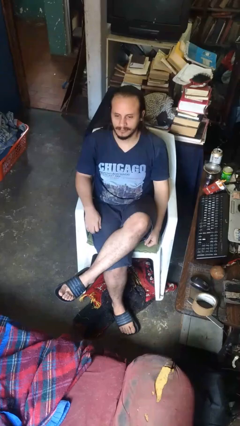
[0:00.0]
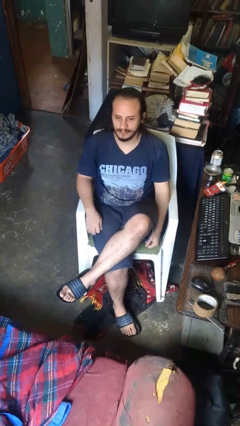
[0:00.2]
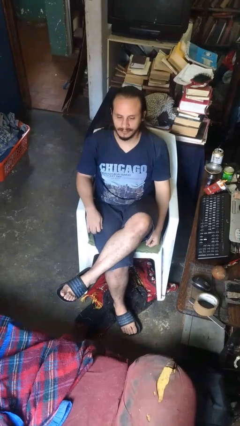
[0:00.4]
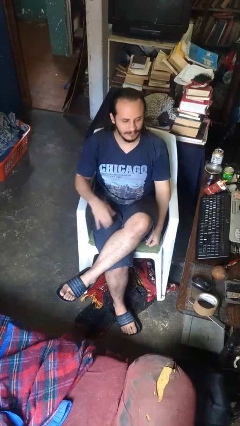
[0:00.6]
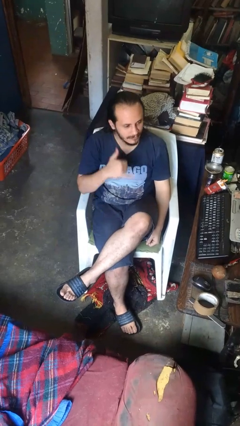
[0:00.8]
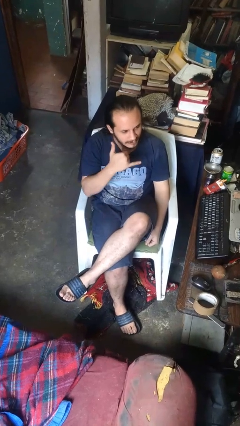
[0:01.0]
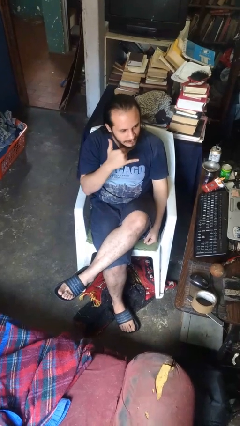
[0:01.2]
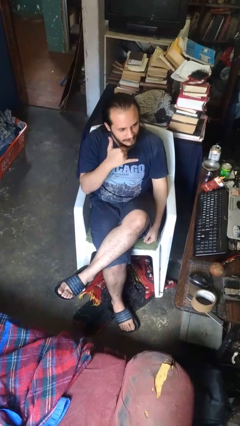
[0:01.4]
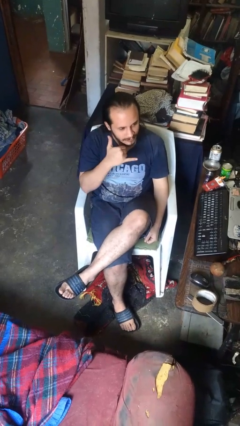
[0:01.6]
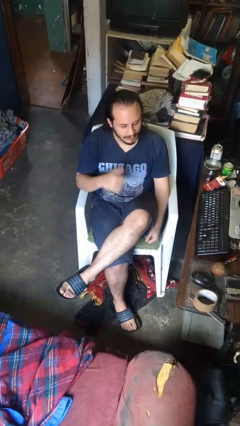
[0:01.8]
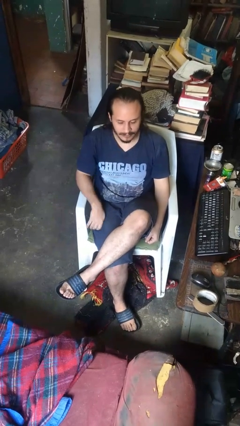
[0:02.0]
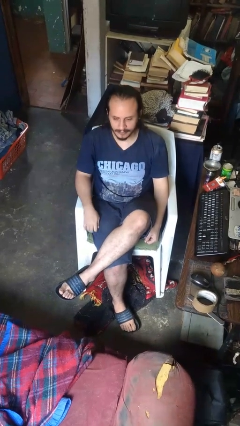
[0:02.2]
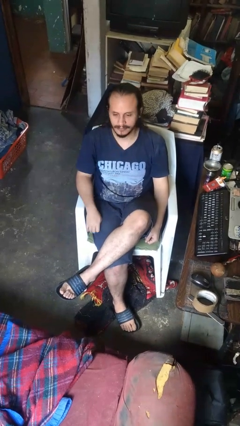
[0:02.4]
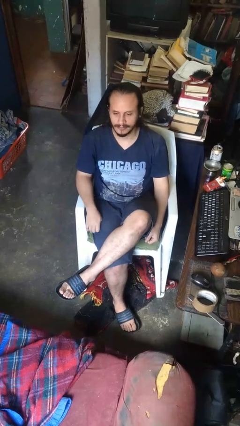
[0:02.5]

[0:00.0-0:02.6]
person gestures call me

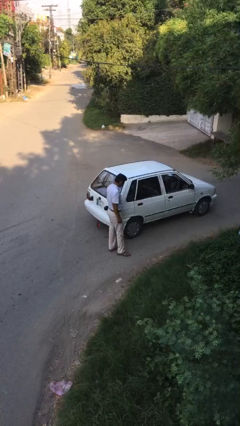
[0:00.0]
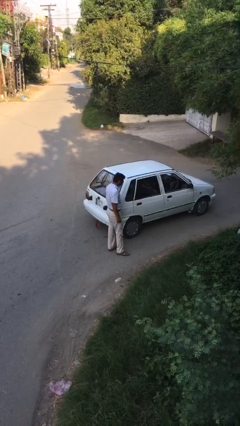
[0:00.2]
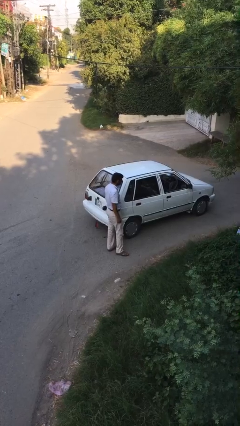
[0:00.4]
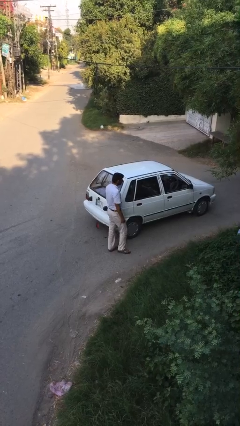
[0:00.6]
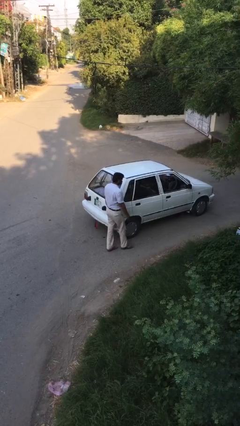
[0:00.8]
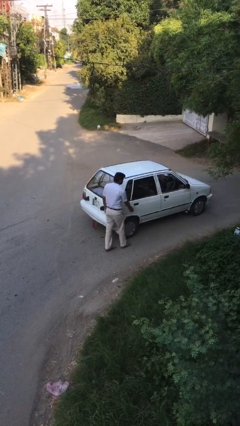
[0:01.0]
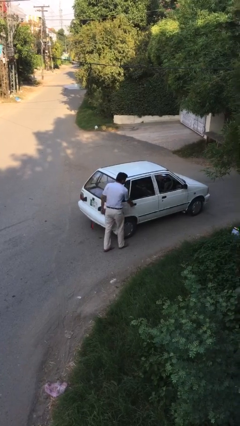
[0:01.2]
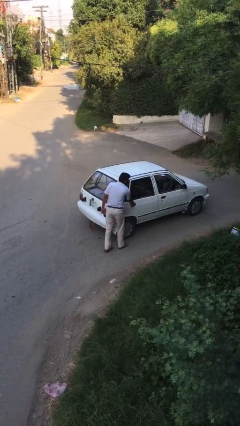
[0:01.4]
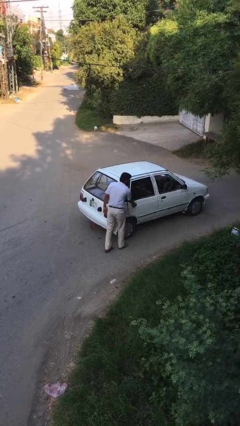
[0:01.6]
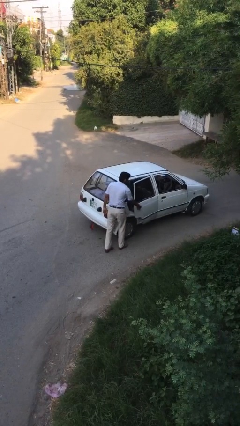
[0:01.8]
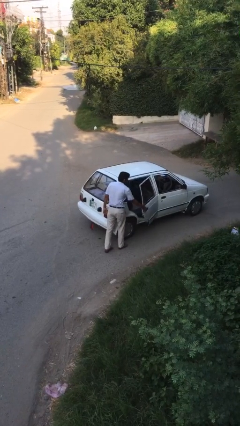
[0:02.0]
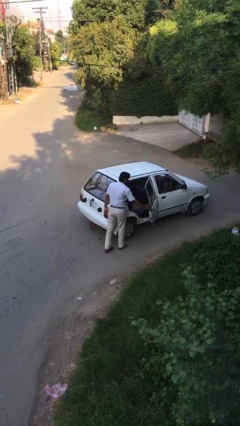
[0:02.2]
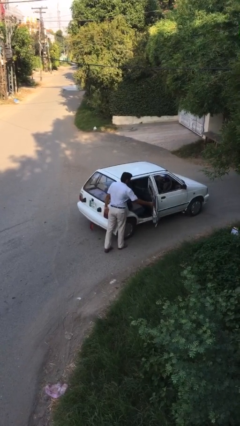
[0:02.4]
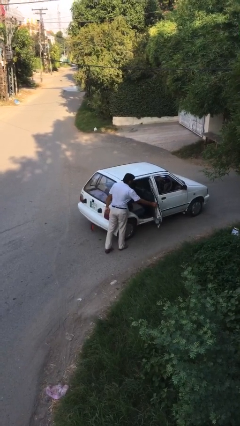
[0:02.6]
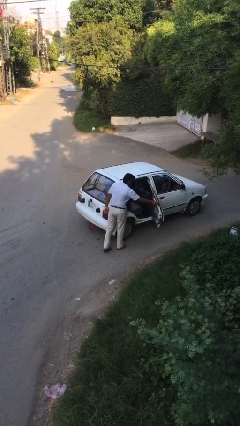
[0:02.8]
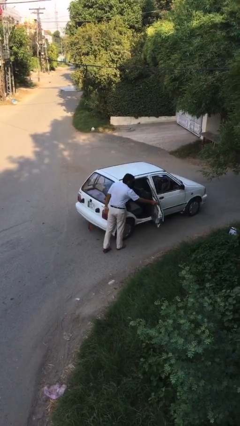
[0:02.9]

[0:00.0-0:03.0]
person opens car door

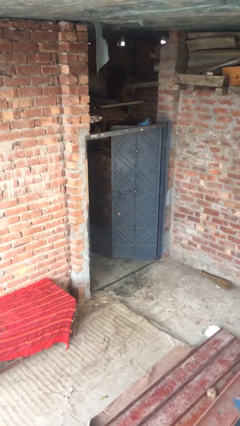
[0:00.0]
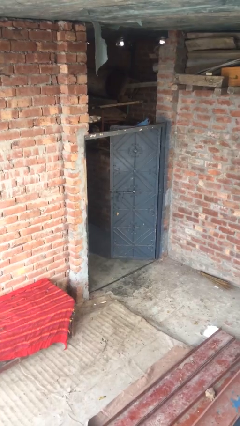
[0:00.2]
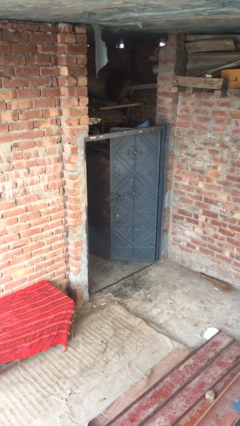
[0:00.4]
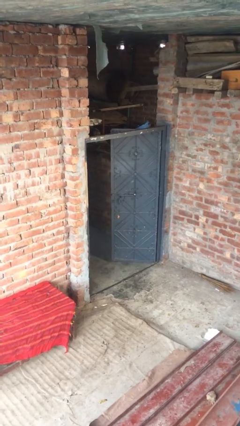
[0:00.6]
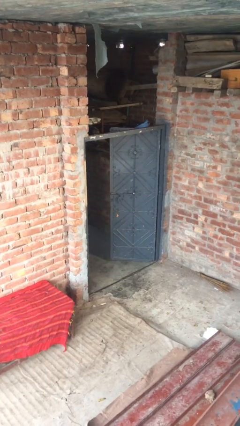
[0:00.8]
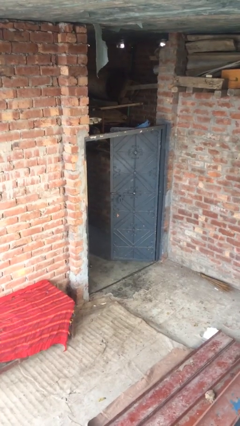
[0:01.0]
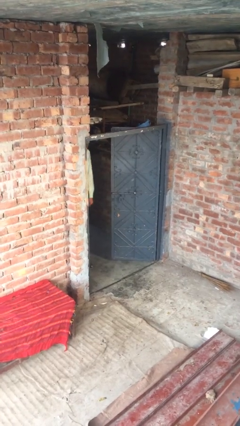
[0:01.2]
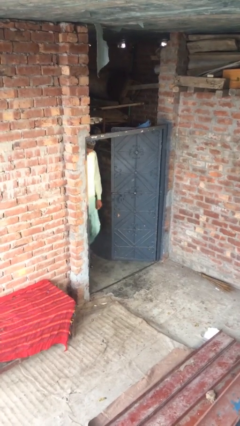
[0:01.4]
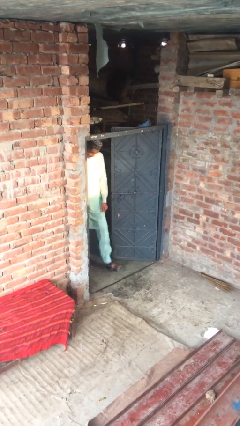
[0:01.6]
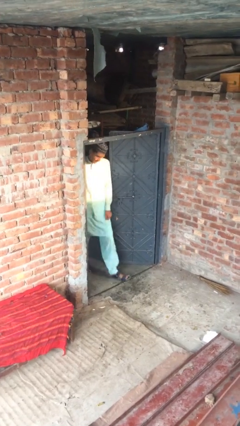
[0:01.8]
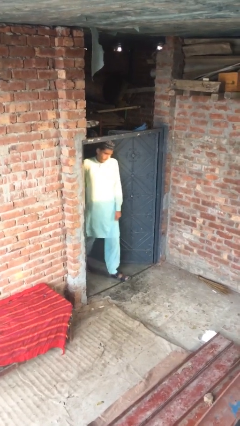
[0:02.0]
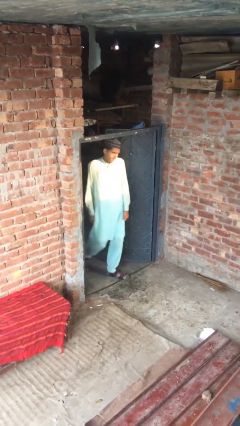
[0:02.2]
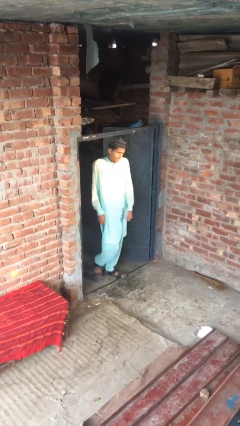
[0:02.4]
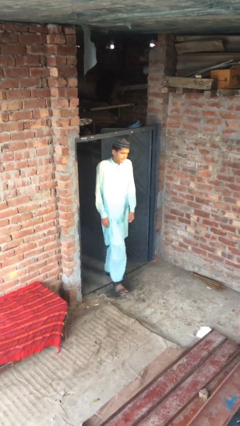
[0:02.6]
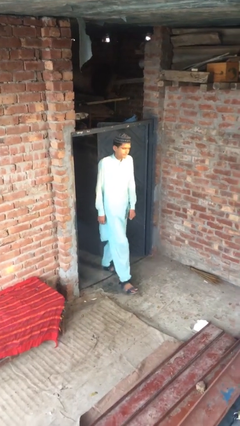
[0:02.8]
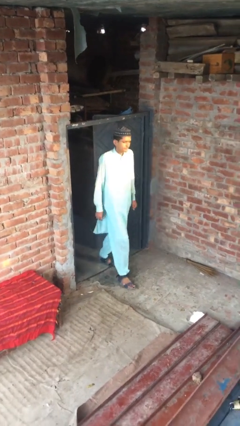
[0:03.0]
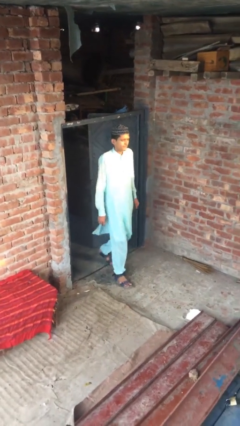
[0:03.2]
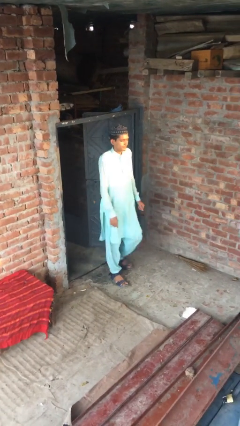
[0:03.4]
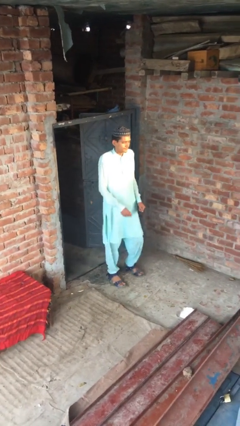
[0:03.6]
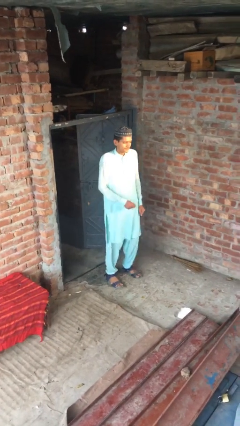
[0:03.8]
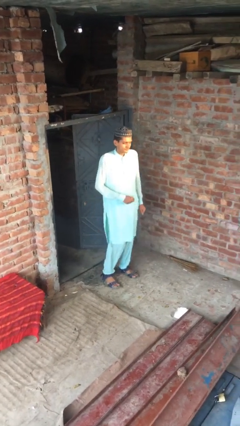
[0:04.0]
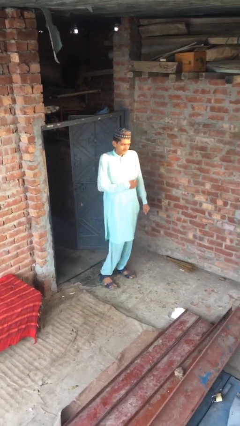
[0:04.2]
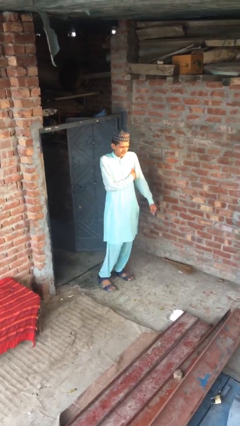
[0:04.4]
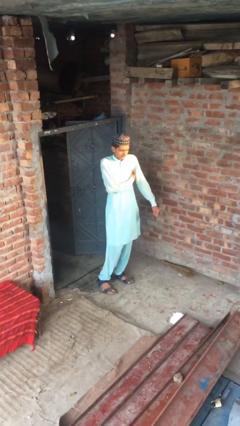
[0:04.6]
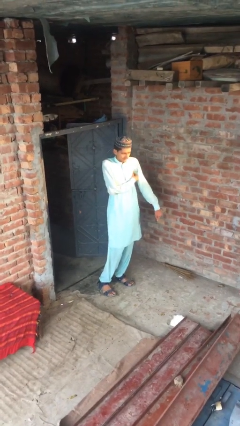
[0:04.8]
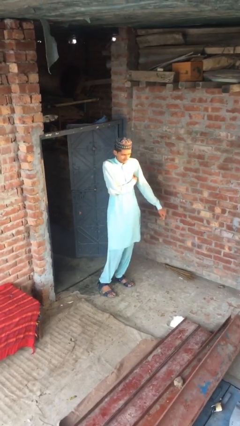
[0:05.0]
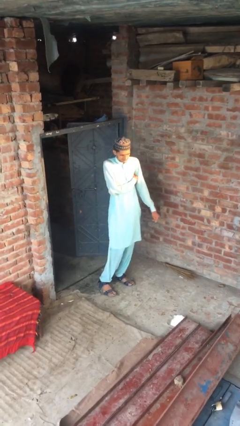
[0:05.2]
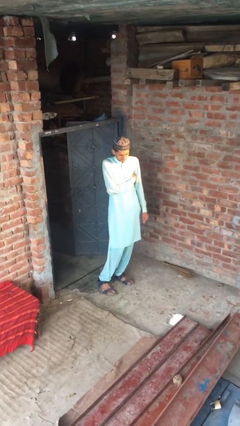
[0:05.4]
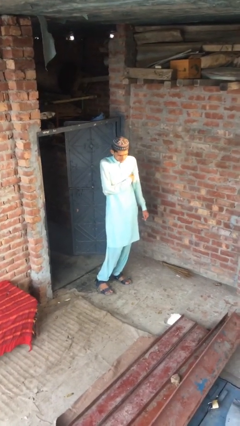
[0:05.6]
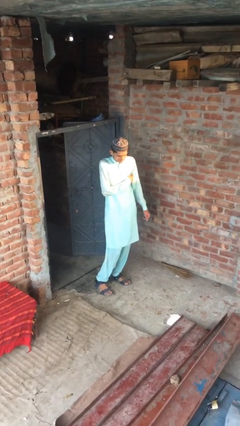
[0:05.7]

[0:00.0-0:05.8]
person enters scene through structure

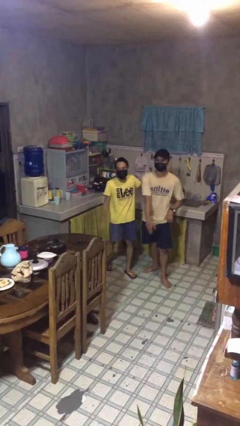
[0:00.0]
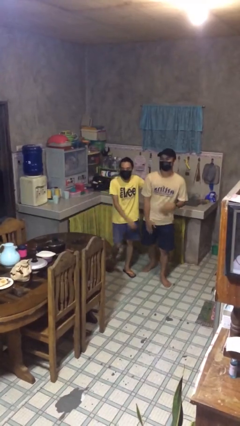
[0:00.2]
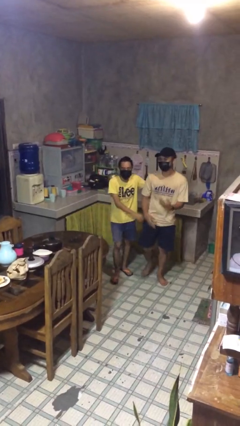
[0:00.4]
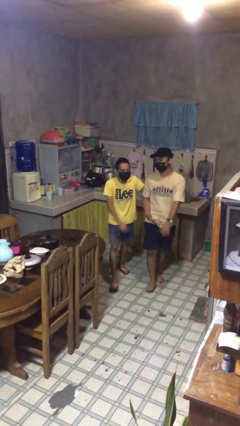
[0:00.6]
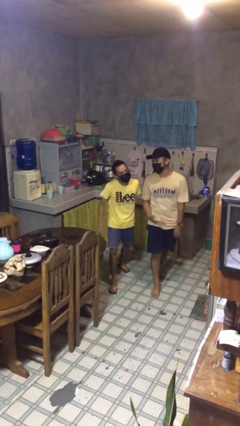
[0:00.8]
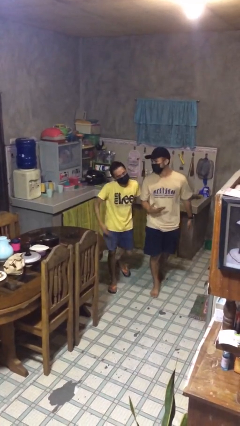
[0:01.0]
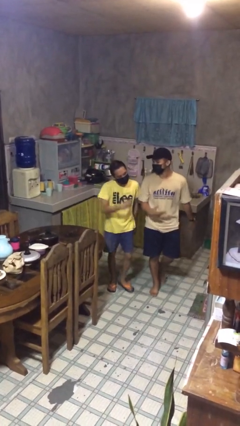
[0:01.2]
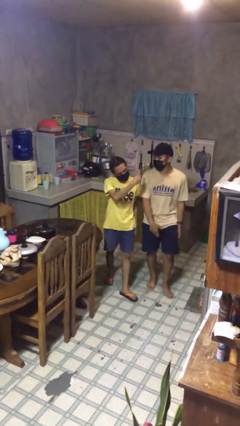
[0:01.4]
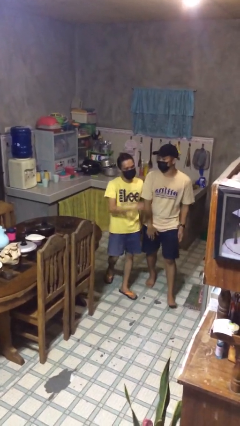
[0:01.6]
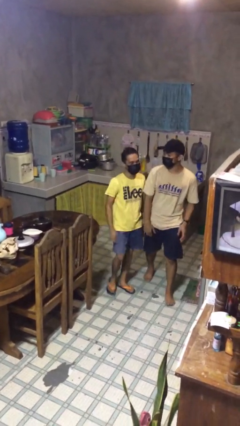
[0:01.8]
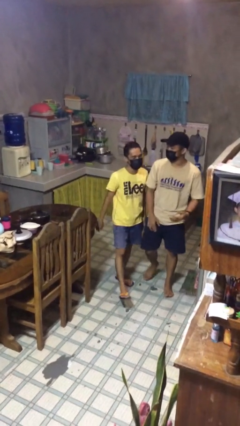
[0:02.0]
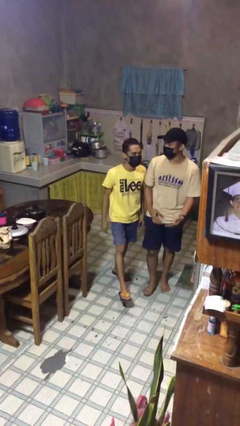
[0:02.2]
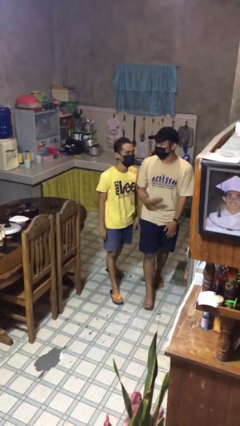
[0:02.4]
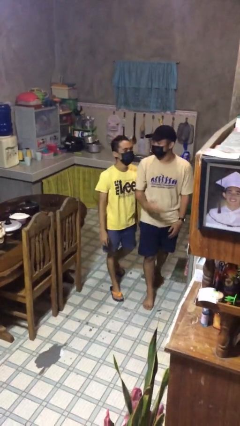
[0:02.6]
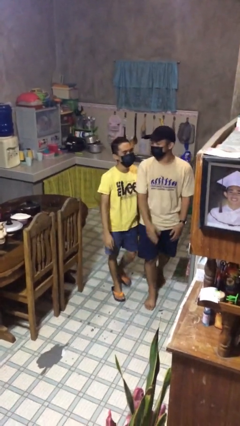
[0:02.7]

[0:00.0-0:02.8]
person talks to person

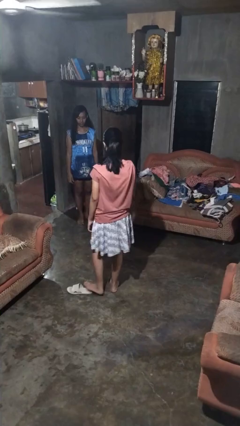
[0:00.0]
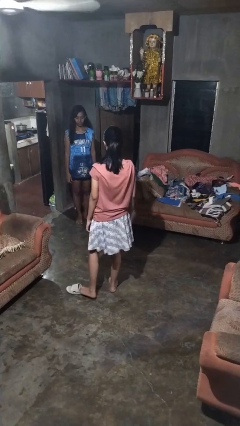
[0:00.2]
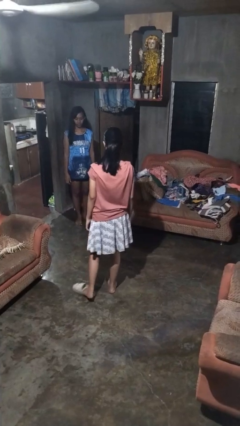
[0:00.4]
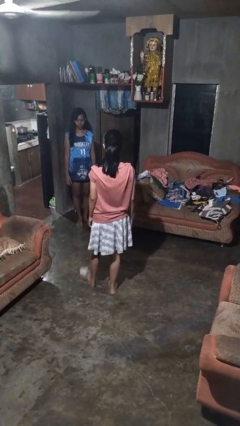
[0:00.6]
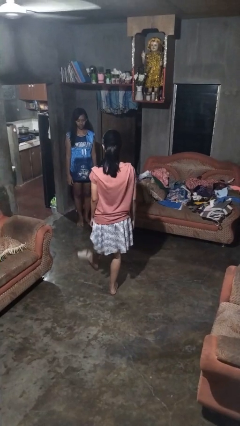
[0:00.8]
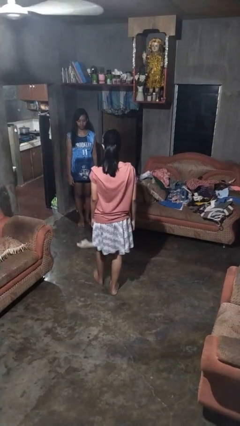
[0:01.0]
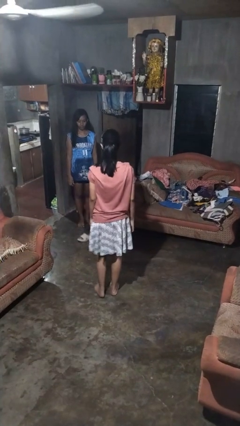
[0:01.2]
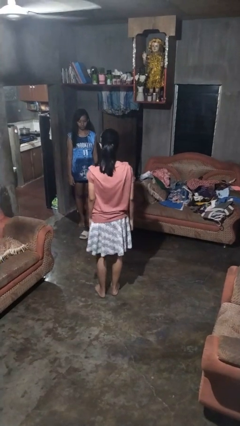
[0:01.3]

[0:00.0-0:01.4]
person kicks object to person

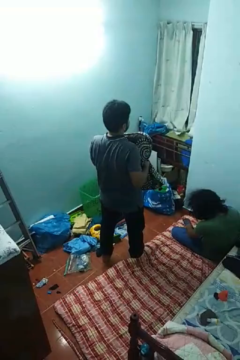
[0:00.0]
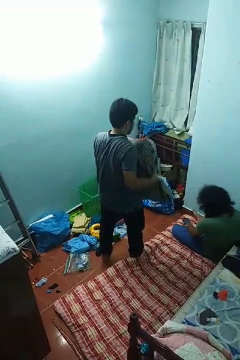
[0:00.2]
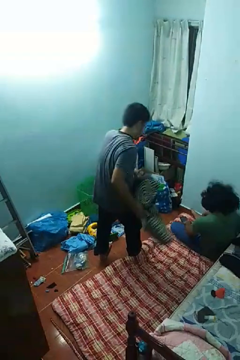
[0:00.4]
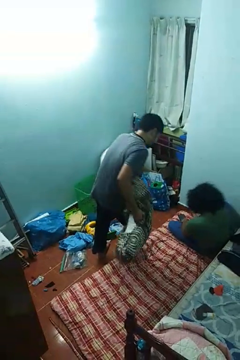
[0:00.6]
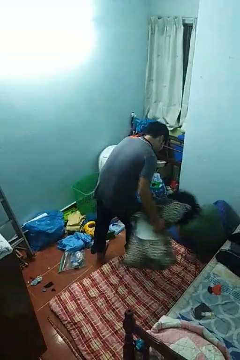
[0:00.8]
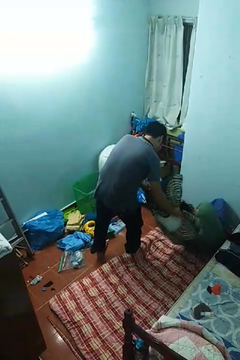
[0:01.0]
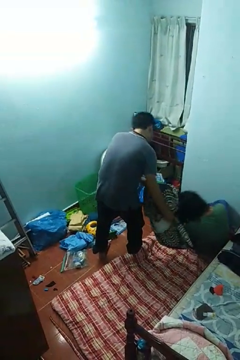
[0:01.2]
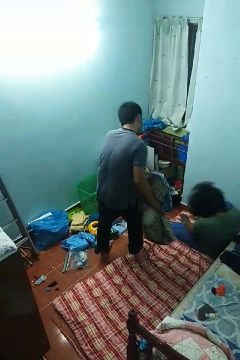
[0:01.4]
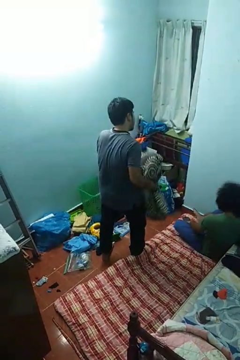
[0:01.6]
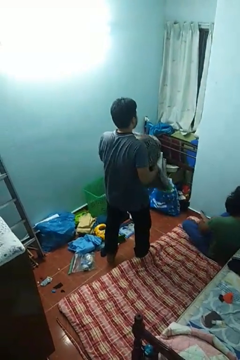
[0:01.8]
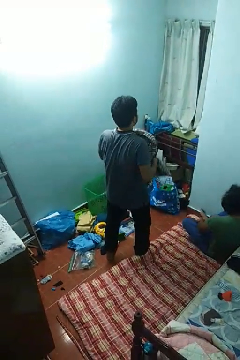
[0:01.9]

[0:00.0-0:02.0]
person hits person with pillow

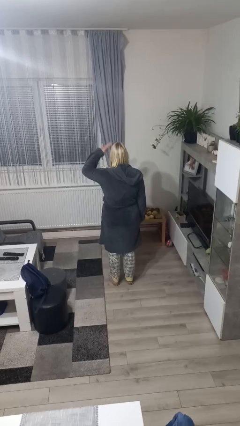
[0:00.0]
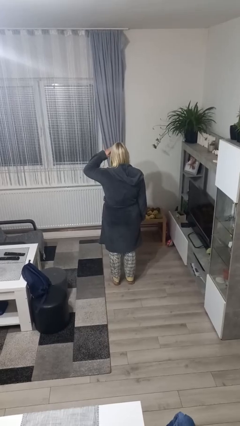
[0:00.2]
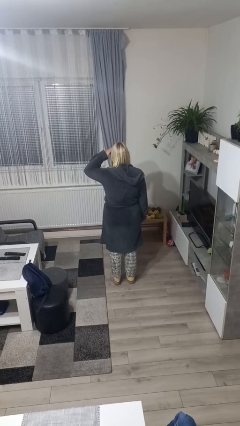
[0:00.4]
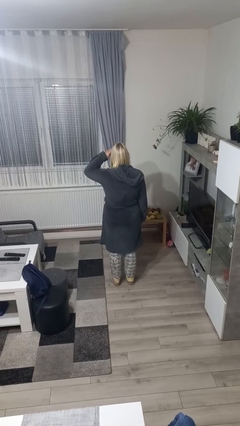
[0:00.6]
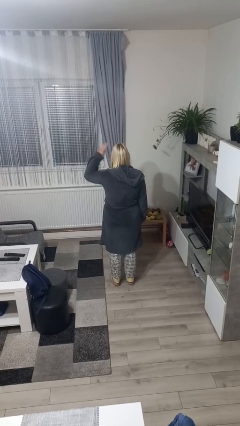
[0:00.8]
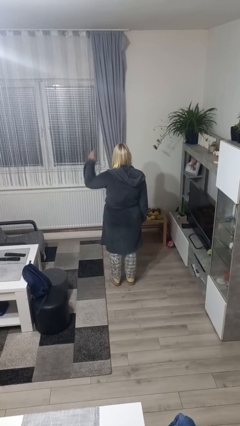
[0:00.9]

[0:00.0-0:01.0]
person salutes
